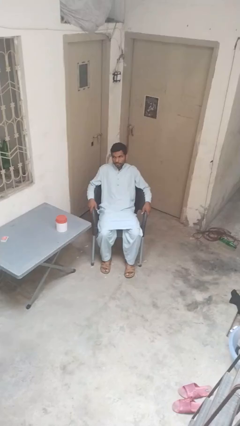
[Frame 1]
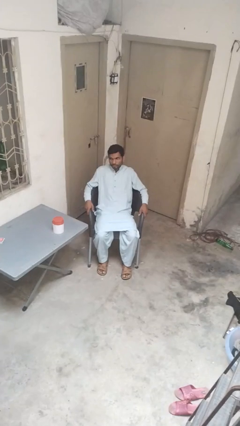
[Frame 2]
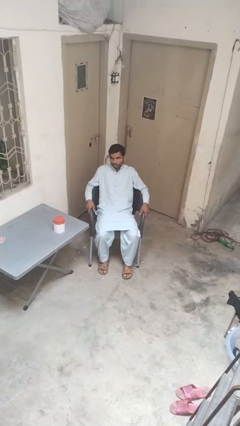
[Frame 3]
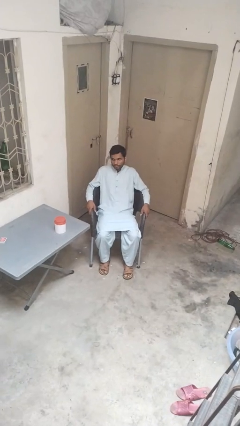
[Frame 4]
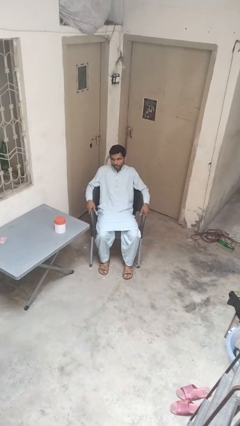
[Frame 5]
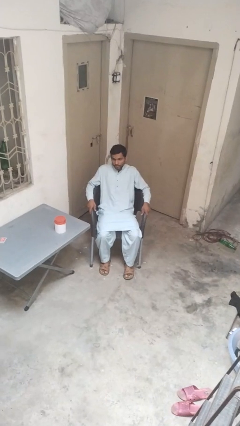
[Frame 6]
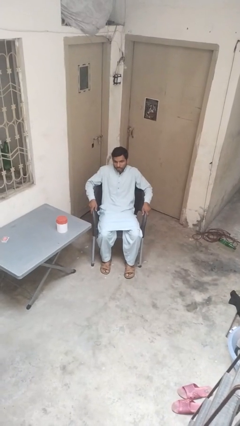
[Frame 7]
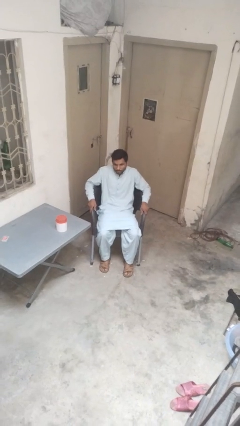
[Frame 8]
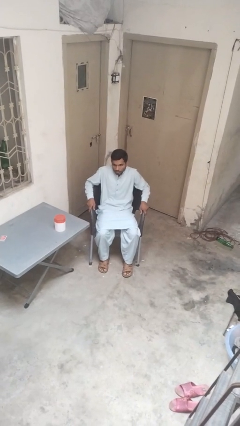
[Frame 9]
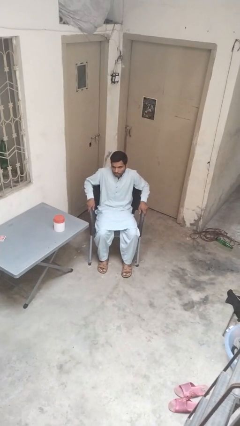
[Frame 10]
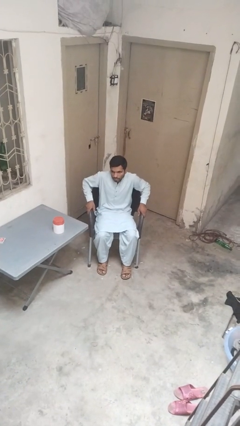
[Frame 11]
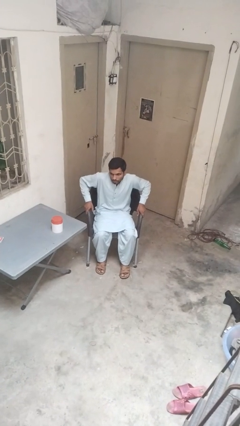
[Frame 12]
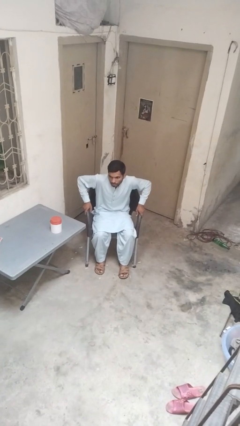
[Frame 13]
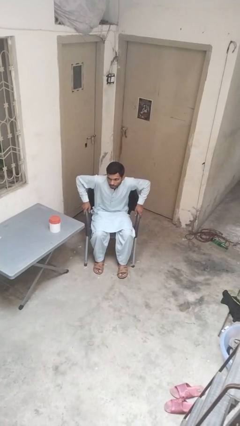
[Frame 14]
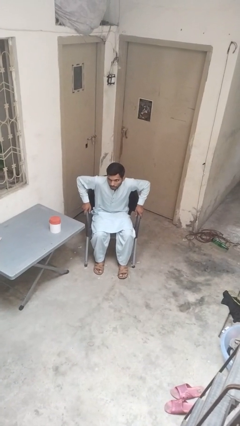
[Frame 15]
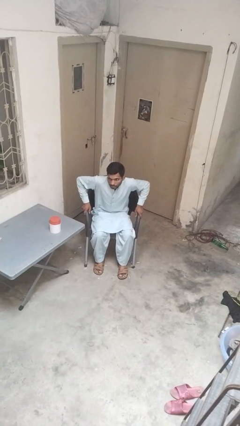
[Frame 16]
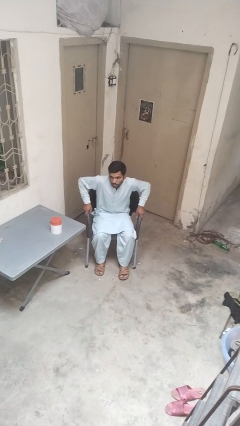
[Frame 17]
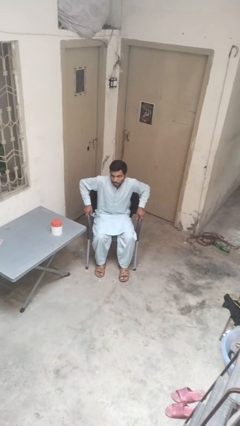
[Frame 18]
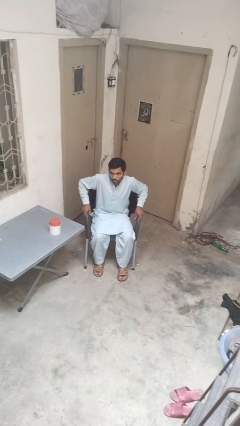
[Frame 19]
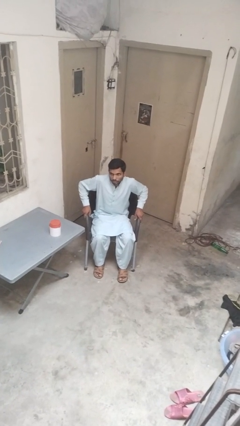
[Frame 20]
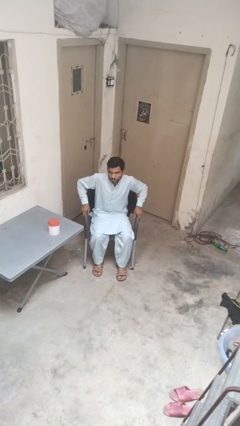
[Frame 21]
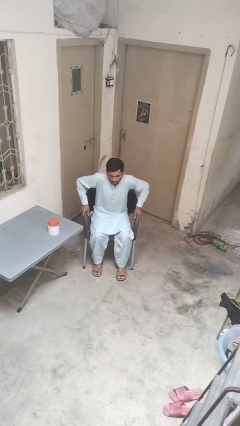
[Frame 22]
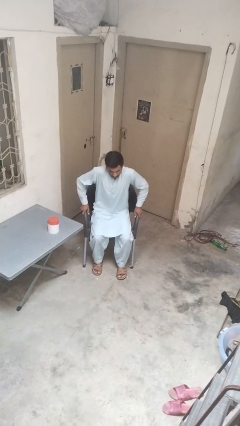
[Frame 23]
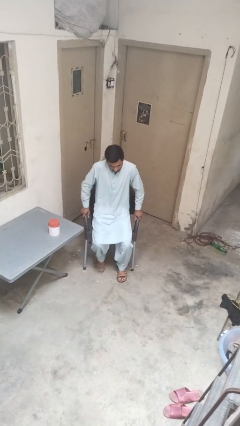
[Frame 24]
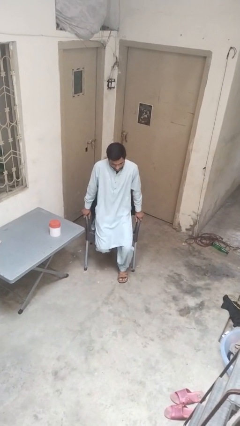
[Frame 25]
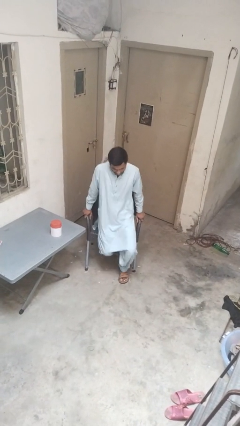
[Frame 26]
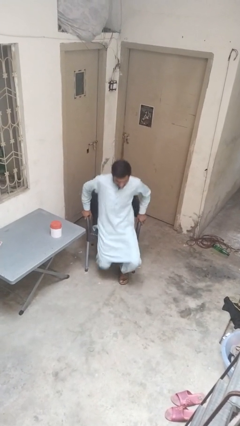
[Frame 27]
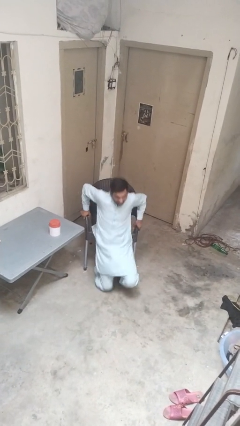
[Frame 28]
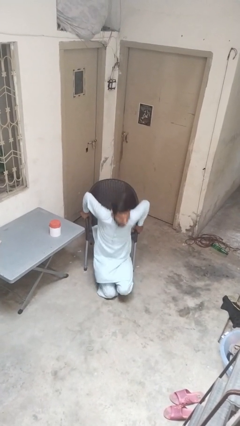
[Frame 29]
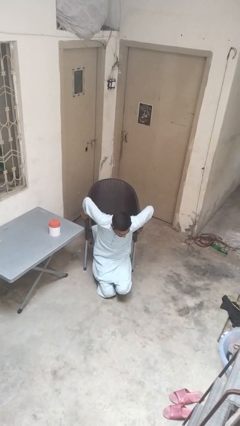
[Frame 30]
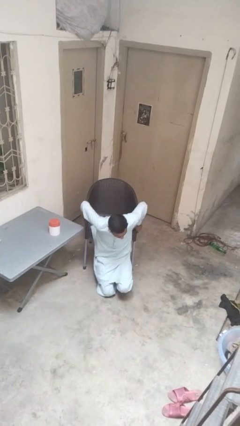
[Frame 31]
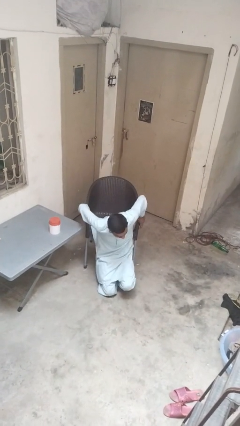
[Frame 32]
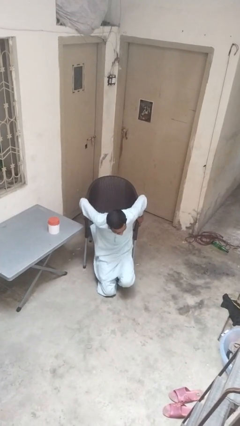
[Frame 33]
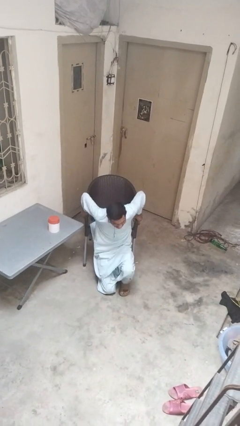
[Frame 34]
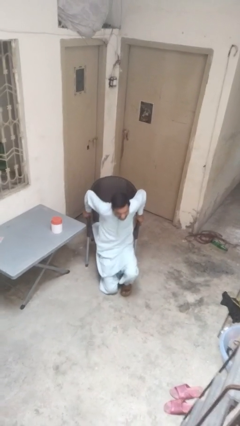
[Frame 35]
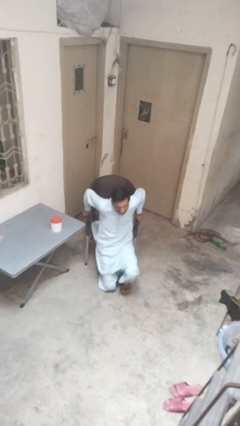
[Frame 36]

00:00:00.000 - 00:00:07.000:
person falls from chair

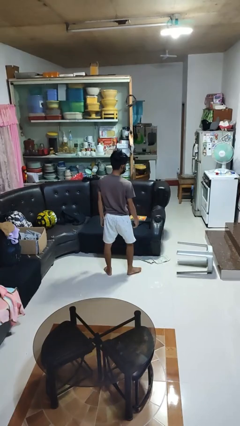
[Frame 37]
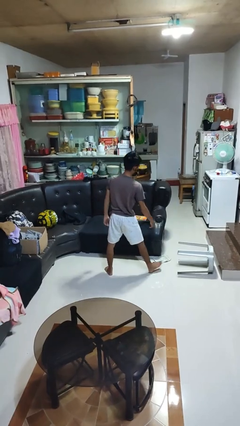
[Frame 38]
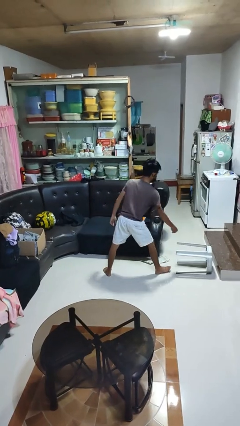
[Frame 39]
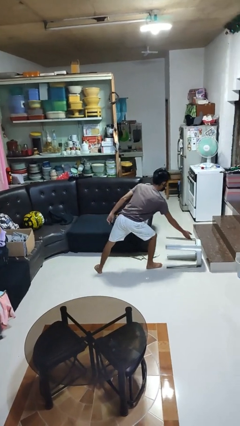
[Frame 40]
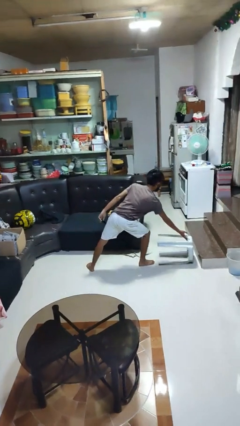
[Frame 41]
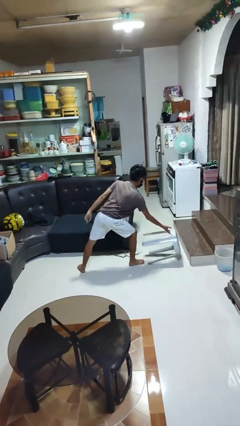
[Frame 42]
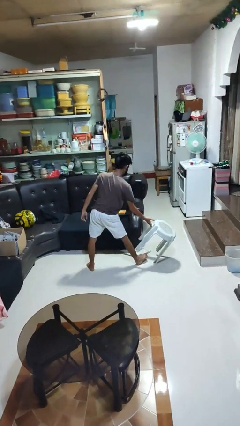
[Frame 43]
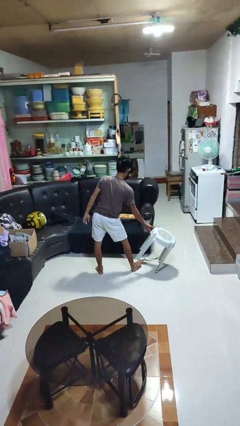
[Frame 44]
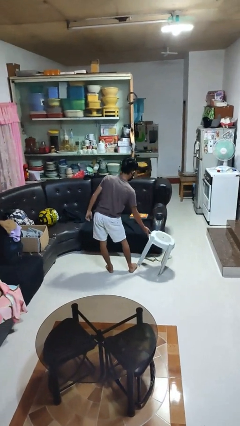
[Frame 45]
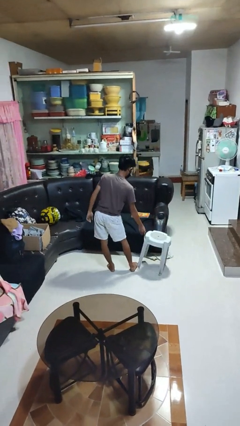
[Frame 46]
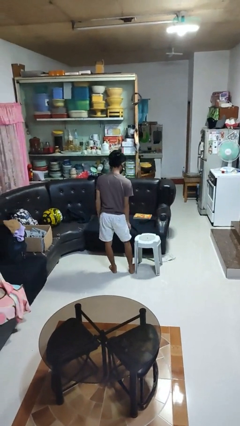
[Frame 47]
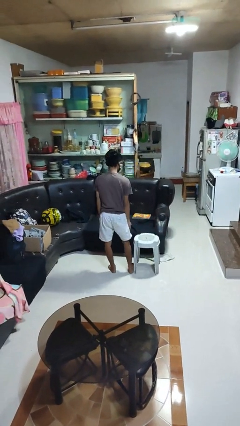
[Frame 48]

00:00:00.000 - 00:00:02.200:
person sets upright furniture

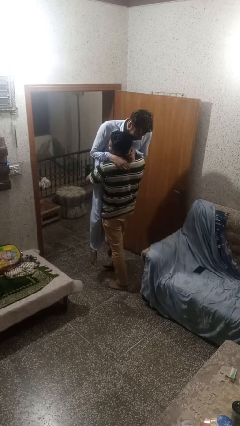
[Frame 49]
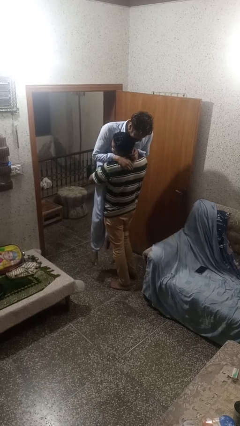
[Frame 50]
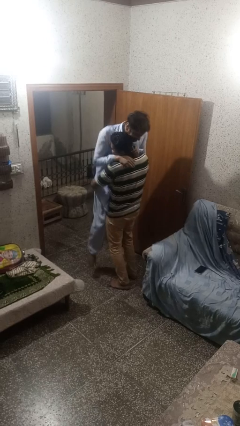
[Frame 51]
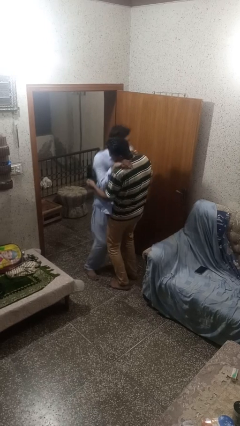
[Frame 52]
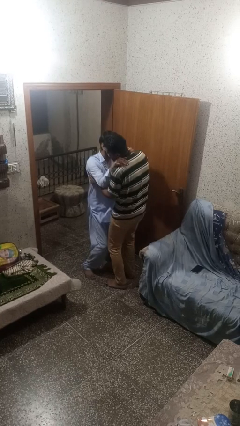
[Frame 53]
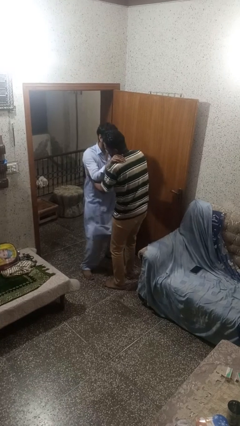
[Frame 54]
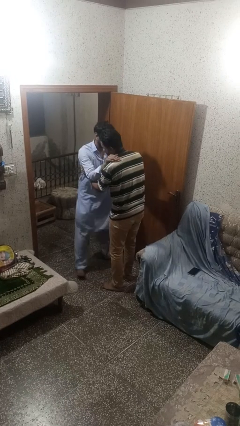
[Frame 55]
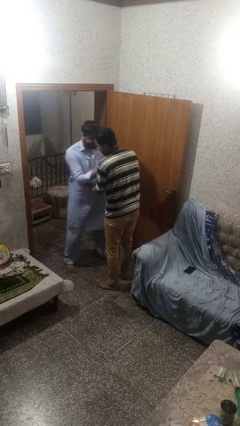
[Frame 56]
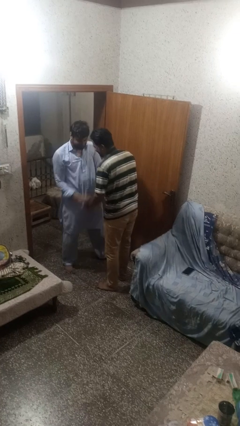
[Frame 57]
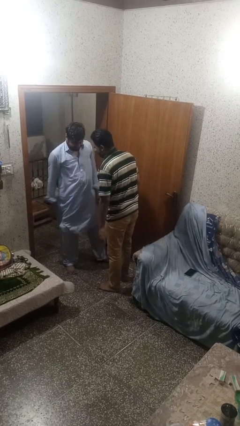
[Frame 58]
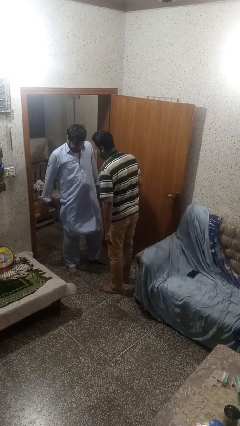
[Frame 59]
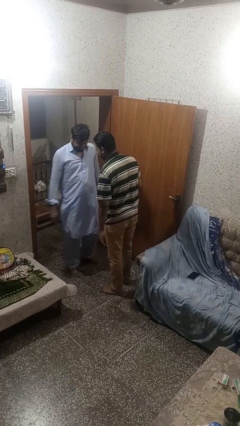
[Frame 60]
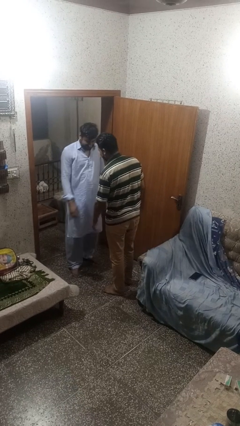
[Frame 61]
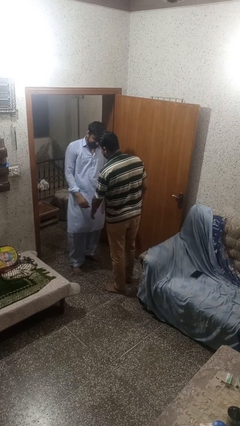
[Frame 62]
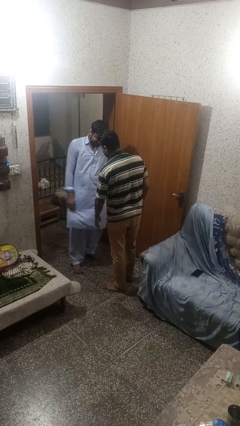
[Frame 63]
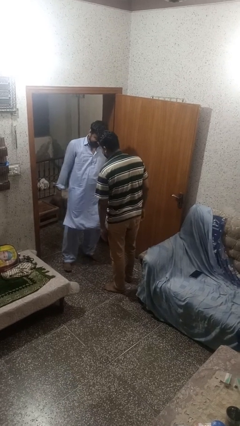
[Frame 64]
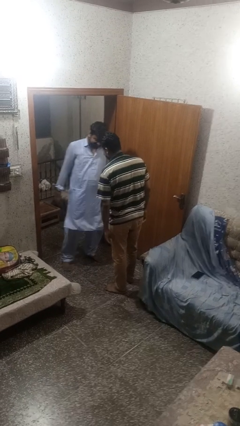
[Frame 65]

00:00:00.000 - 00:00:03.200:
person puts down person

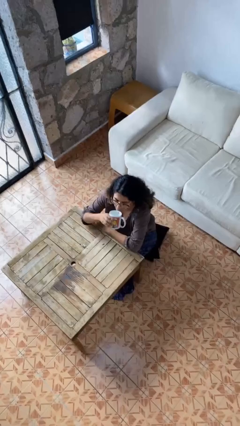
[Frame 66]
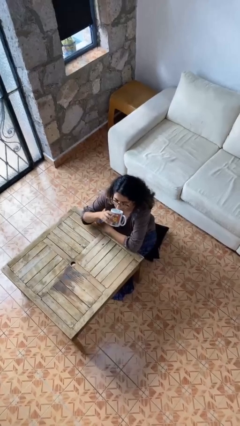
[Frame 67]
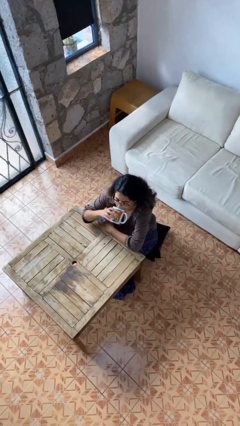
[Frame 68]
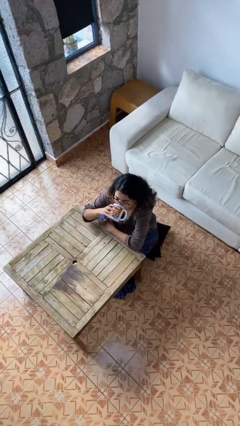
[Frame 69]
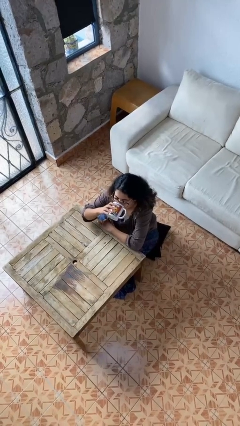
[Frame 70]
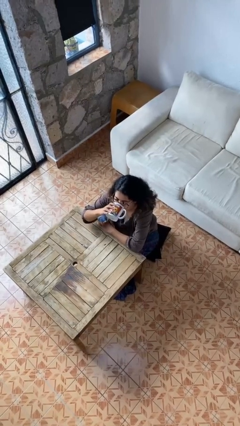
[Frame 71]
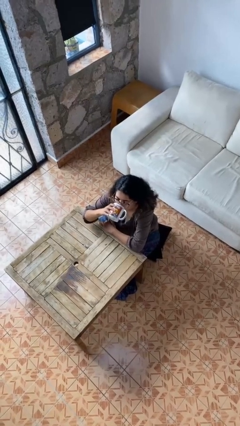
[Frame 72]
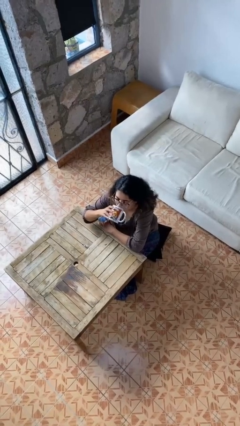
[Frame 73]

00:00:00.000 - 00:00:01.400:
person drinks from mug

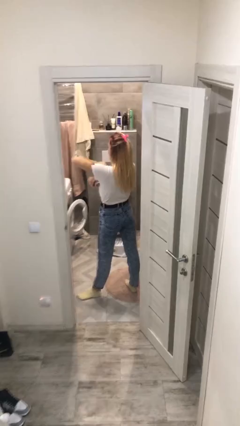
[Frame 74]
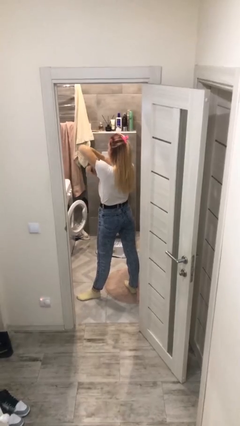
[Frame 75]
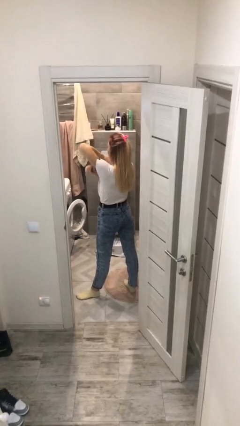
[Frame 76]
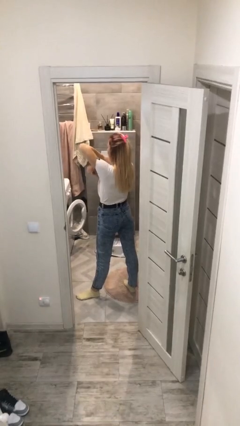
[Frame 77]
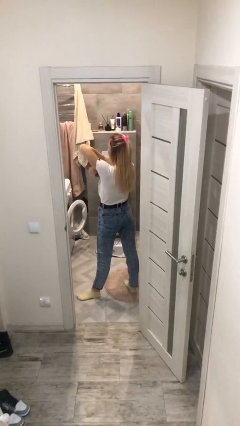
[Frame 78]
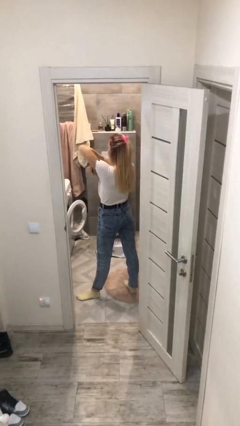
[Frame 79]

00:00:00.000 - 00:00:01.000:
person applies deodorant

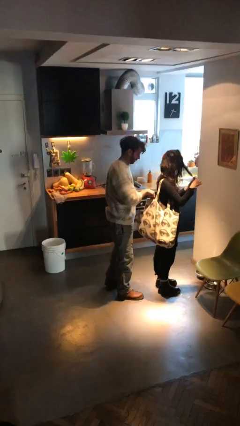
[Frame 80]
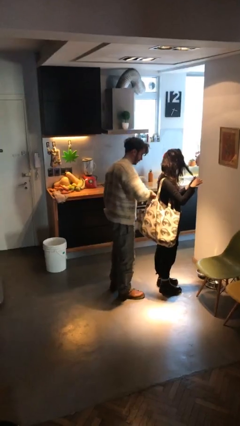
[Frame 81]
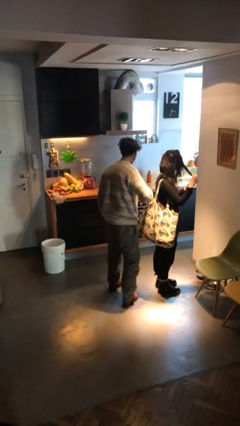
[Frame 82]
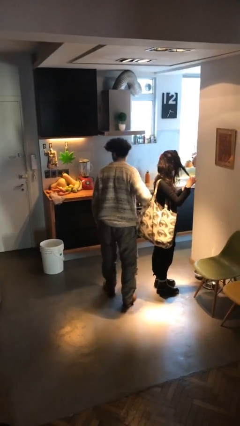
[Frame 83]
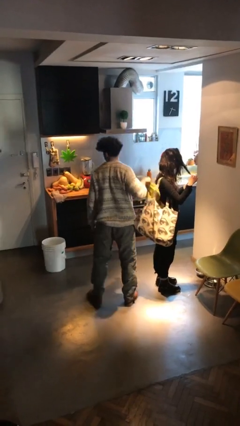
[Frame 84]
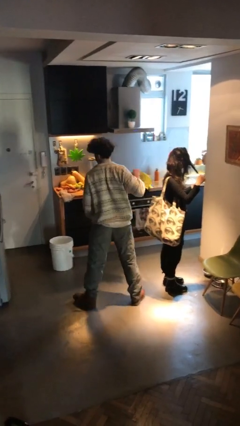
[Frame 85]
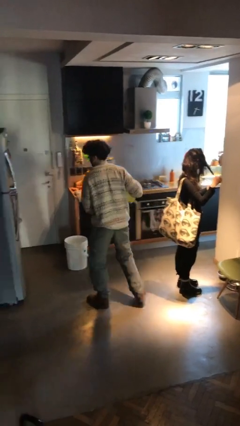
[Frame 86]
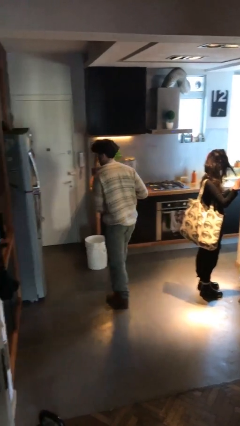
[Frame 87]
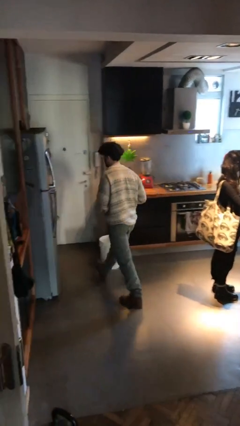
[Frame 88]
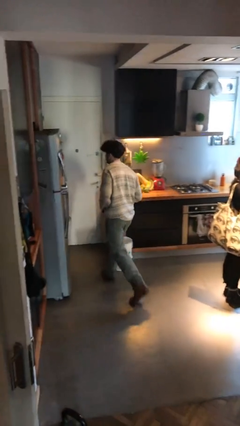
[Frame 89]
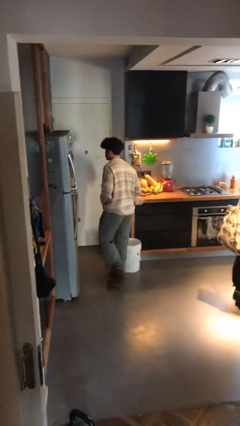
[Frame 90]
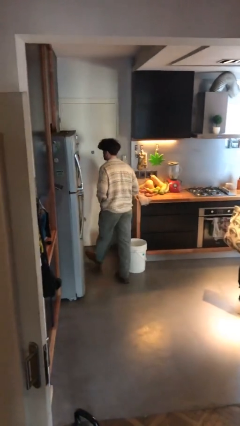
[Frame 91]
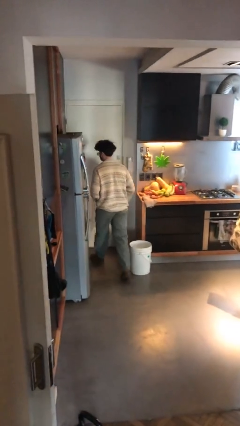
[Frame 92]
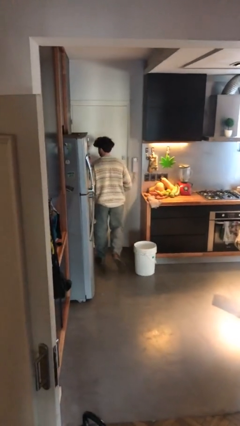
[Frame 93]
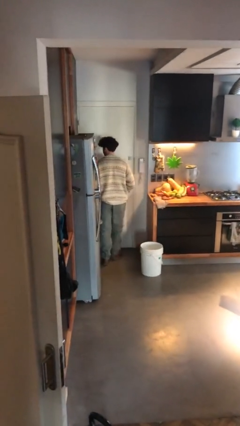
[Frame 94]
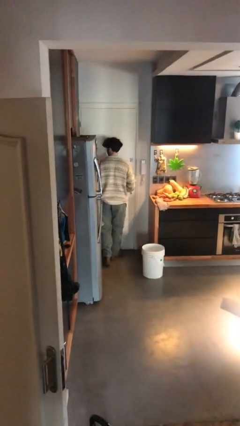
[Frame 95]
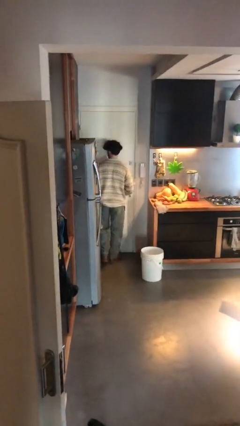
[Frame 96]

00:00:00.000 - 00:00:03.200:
person steals object from person
